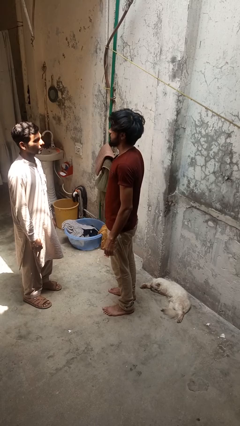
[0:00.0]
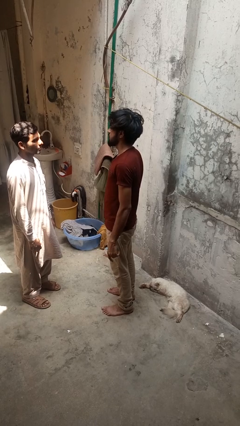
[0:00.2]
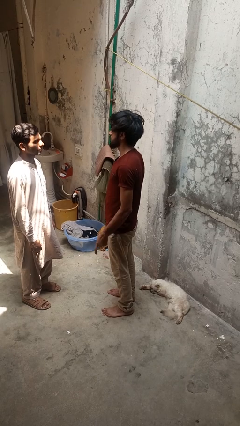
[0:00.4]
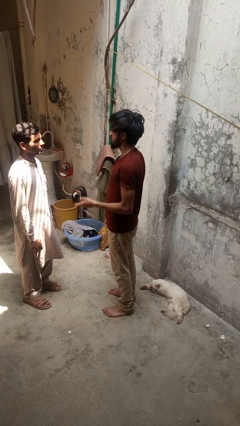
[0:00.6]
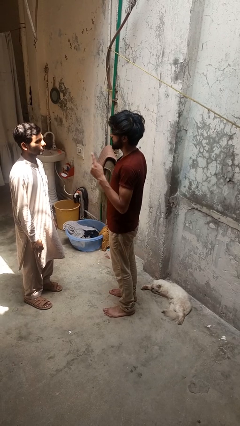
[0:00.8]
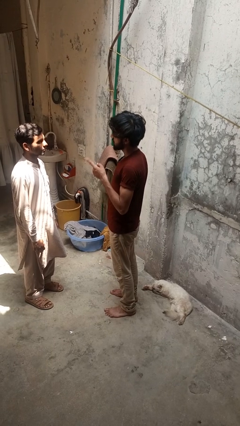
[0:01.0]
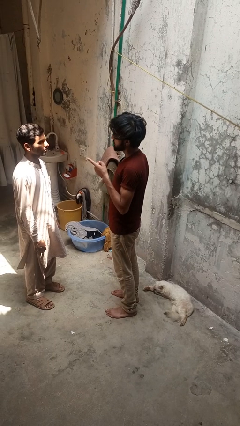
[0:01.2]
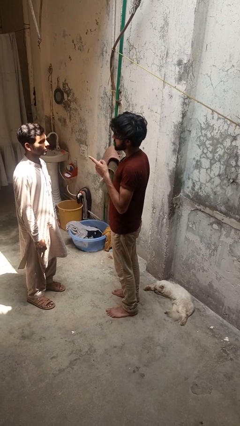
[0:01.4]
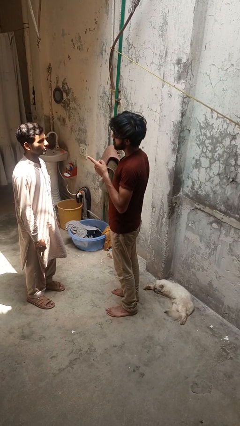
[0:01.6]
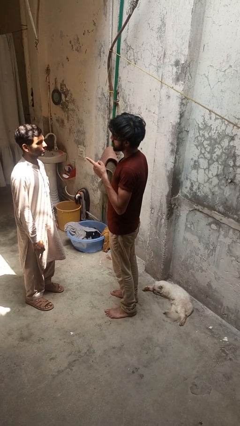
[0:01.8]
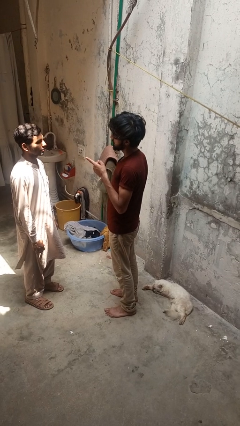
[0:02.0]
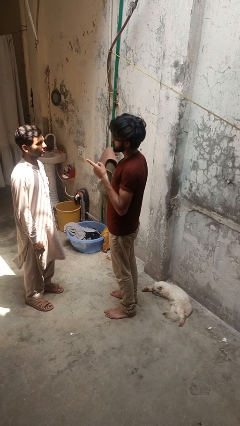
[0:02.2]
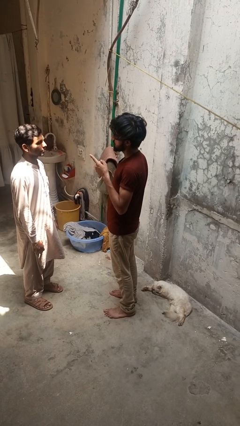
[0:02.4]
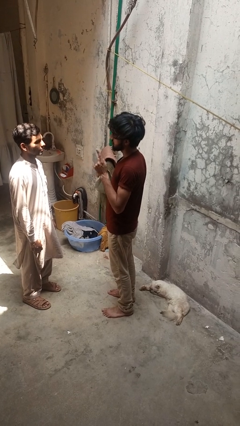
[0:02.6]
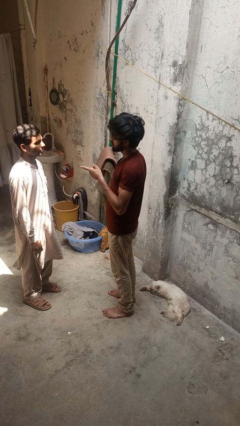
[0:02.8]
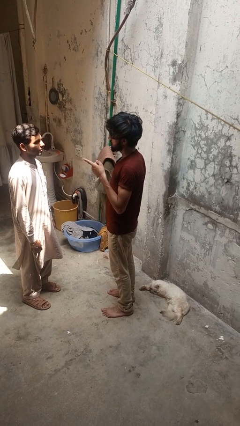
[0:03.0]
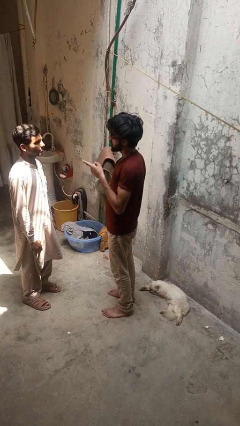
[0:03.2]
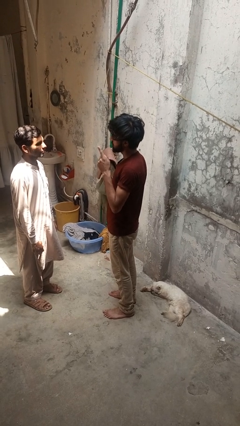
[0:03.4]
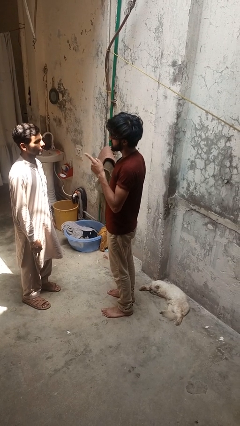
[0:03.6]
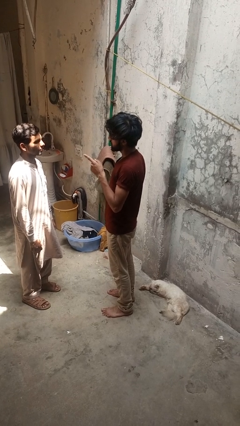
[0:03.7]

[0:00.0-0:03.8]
person points at person

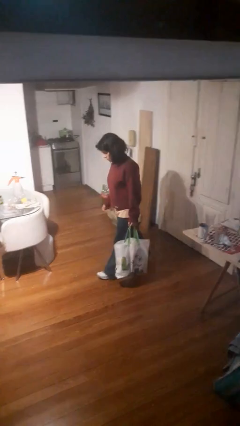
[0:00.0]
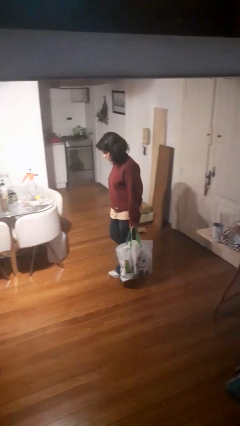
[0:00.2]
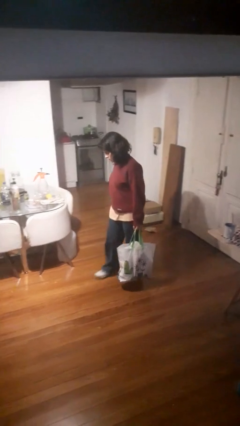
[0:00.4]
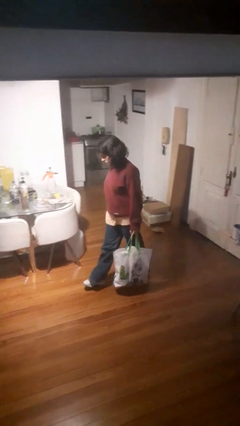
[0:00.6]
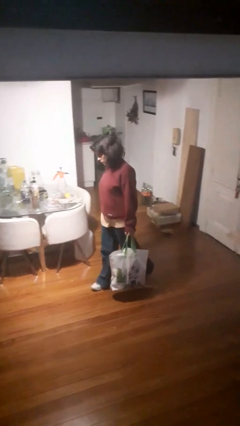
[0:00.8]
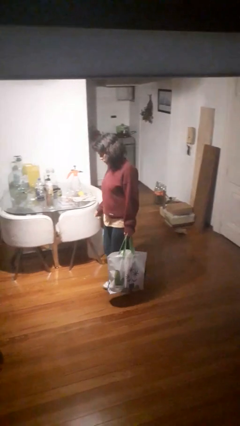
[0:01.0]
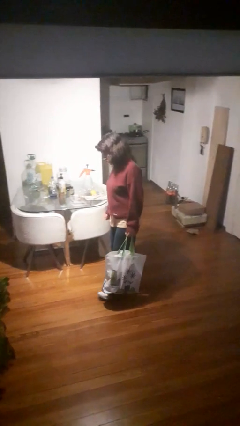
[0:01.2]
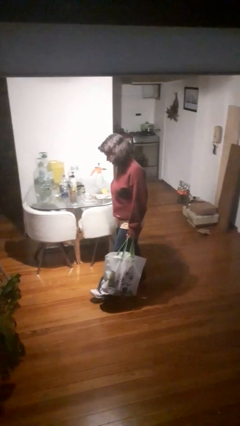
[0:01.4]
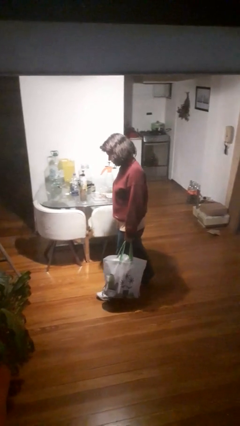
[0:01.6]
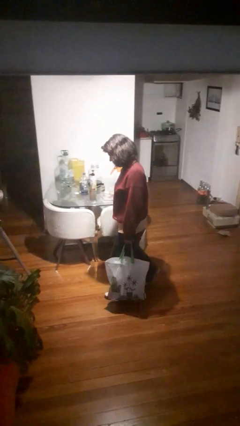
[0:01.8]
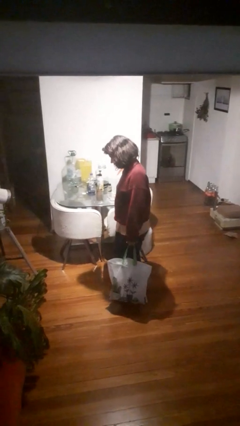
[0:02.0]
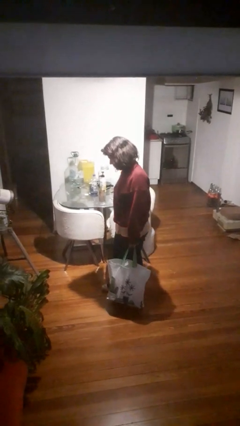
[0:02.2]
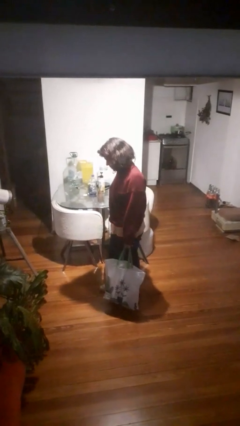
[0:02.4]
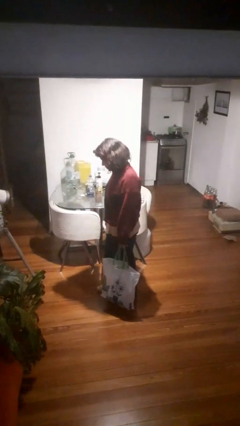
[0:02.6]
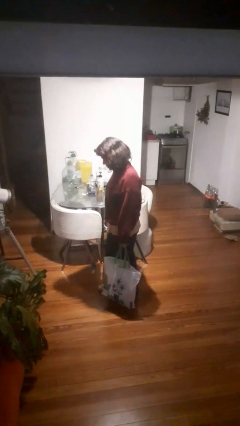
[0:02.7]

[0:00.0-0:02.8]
person carries groceries

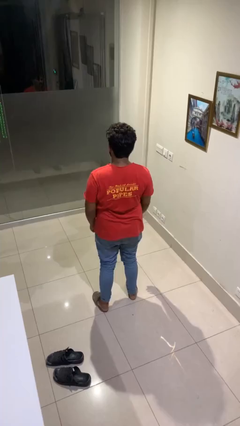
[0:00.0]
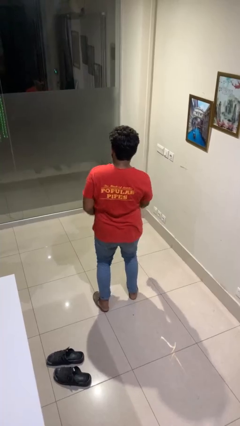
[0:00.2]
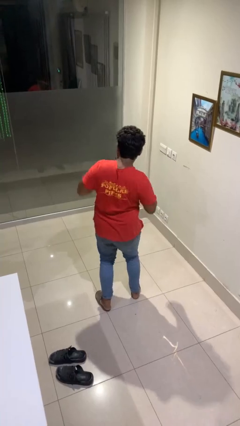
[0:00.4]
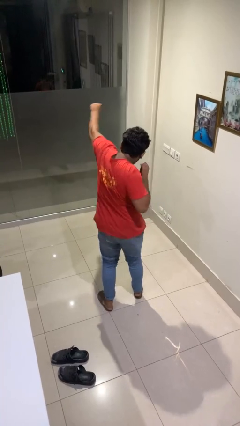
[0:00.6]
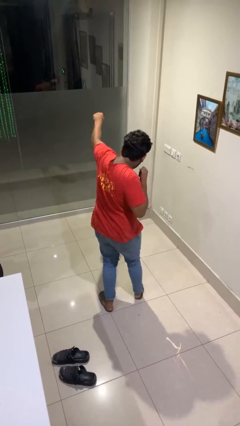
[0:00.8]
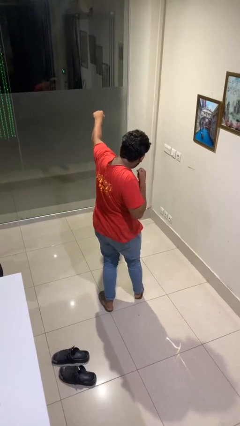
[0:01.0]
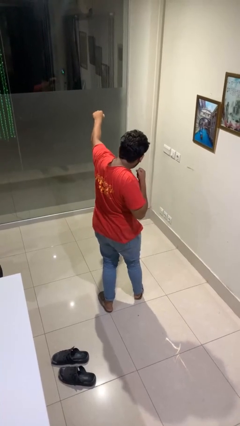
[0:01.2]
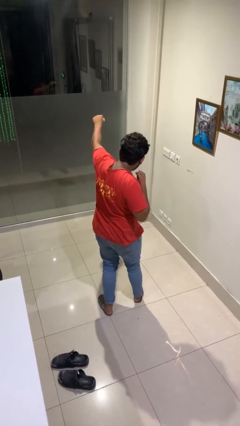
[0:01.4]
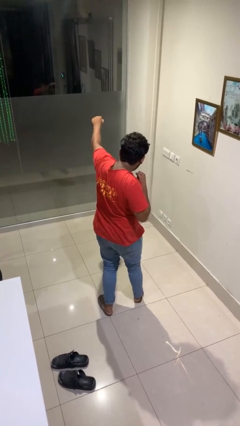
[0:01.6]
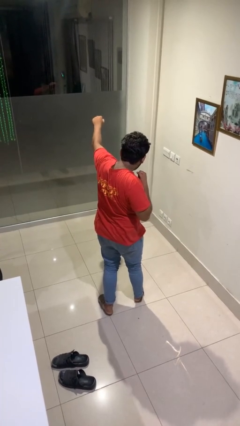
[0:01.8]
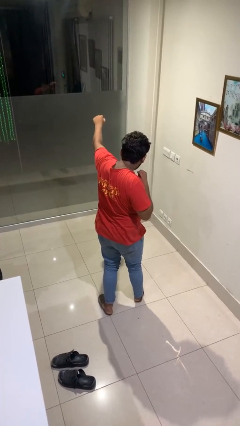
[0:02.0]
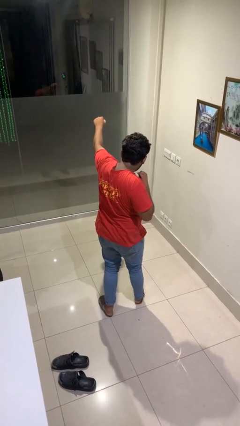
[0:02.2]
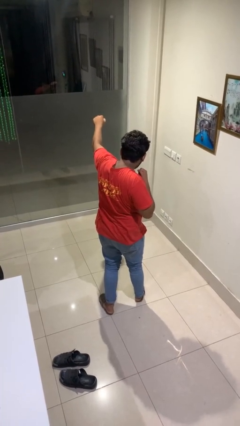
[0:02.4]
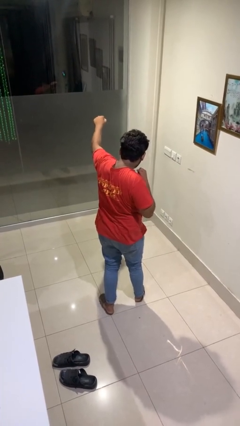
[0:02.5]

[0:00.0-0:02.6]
person punches

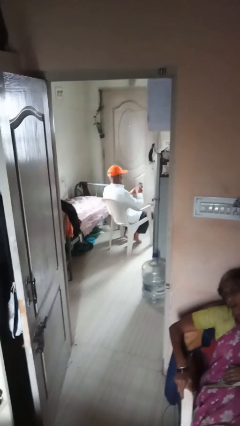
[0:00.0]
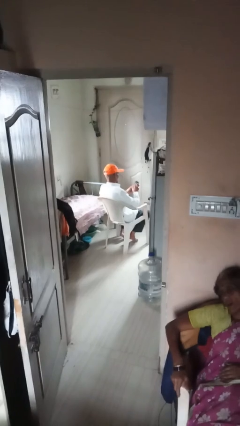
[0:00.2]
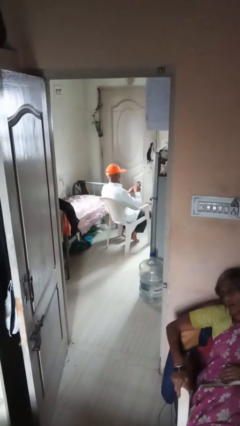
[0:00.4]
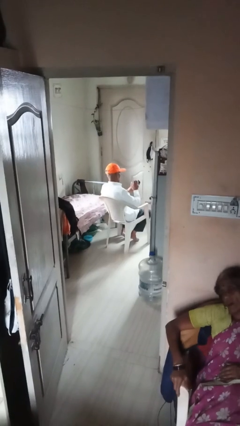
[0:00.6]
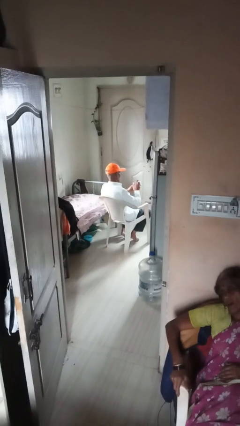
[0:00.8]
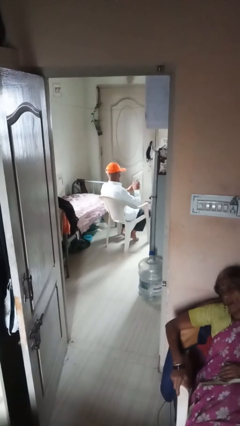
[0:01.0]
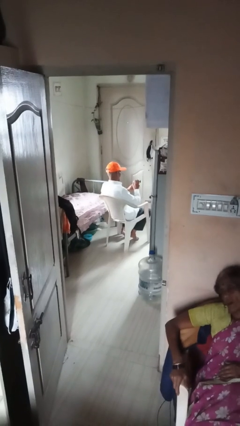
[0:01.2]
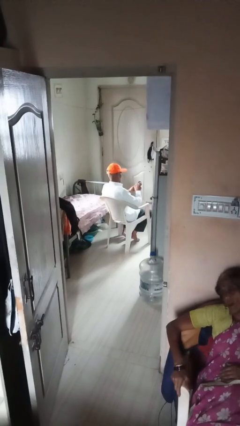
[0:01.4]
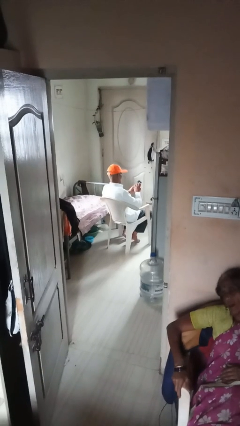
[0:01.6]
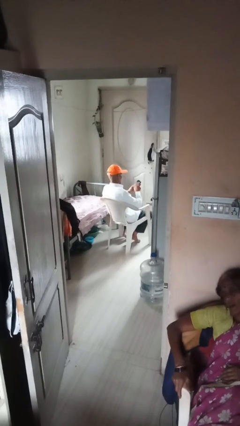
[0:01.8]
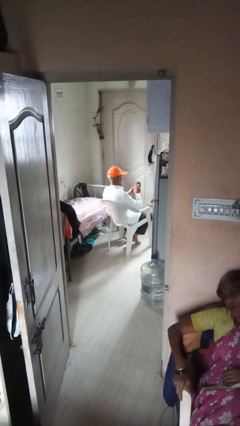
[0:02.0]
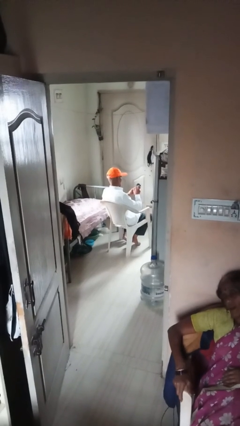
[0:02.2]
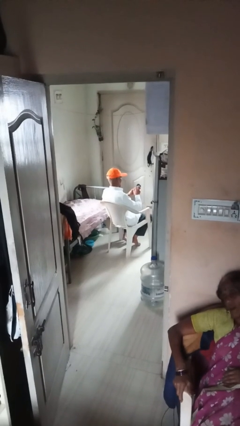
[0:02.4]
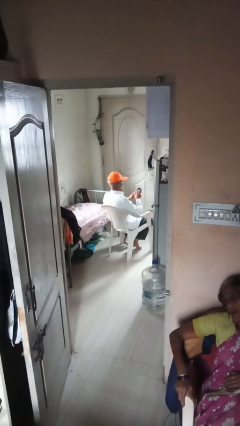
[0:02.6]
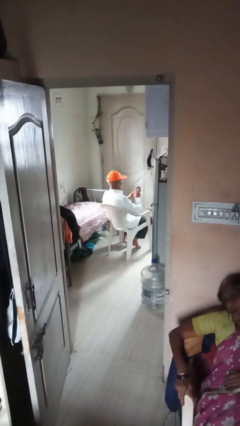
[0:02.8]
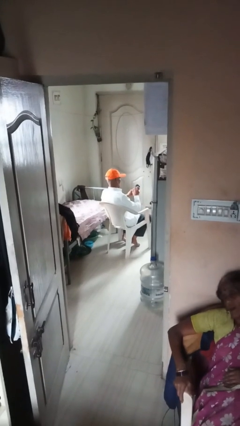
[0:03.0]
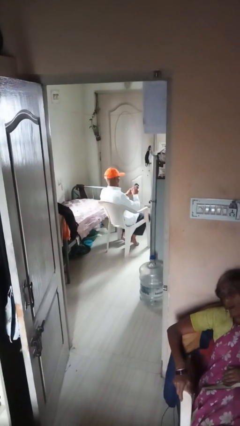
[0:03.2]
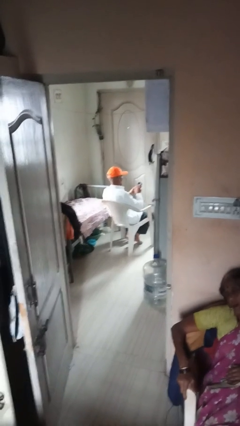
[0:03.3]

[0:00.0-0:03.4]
person taps object with finger

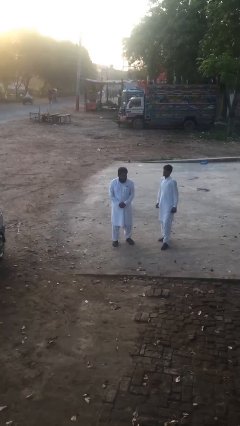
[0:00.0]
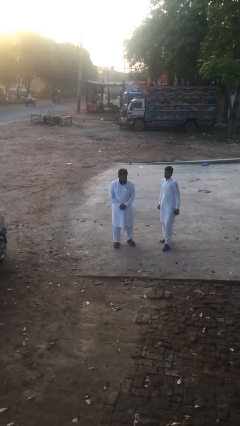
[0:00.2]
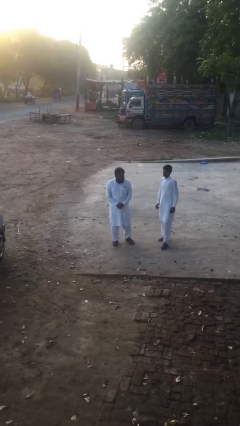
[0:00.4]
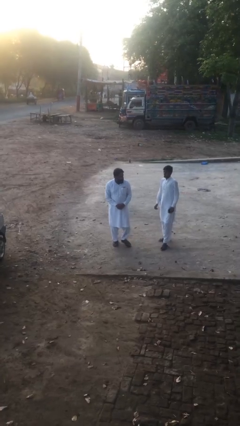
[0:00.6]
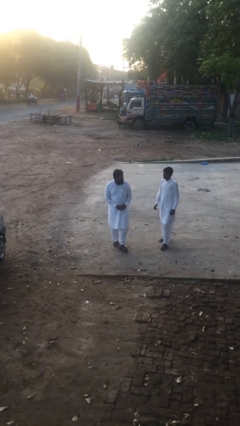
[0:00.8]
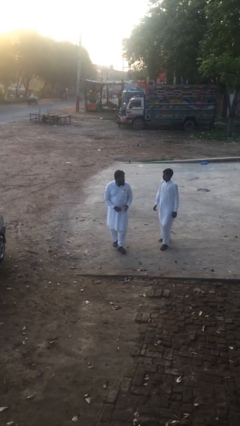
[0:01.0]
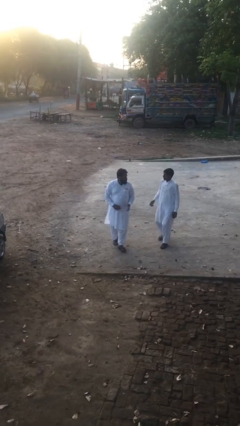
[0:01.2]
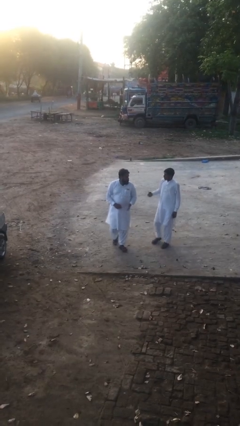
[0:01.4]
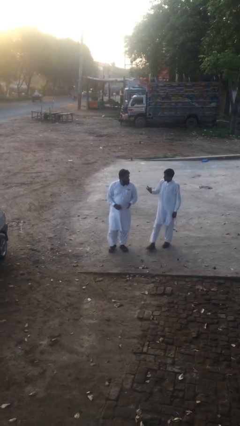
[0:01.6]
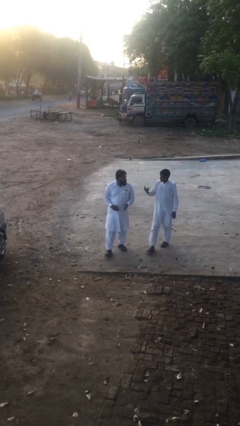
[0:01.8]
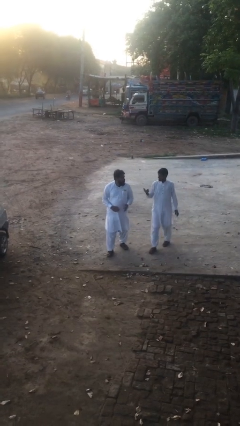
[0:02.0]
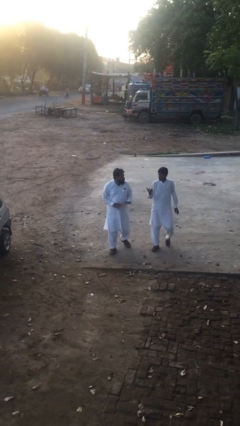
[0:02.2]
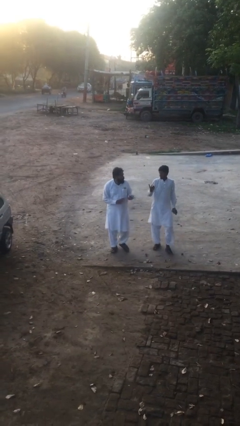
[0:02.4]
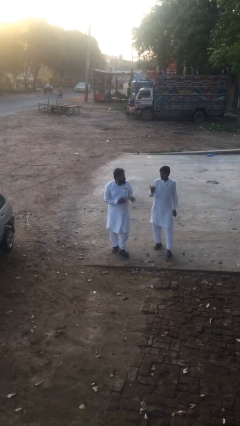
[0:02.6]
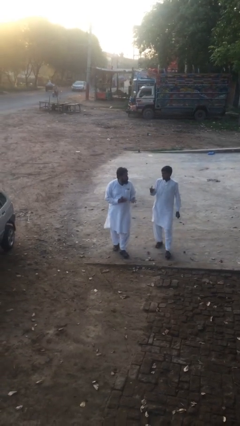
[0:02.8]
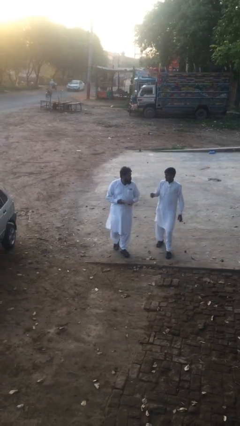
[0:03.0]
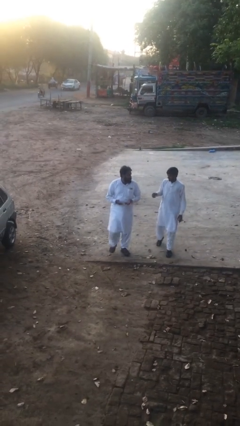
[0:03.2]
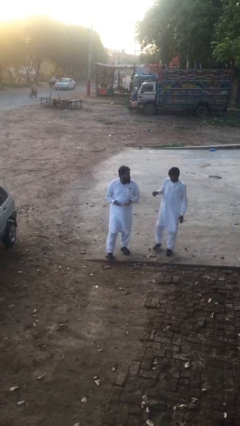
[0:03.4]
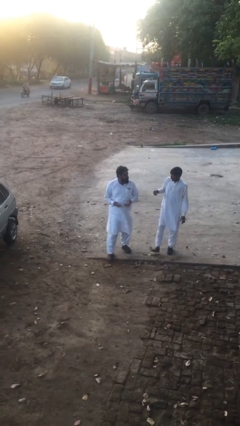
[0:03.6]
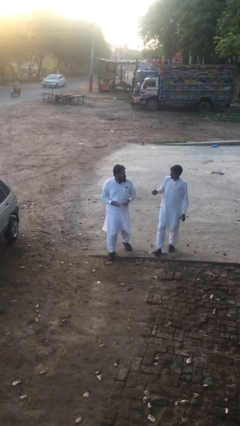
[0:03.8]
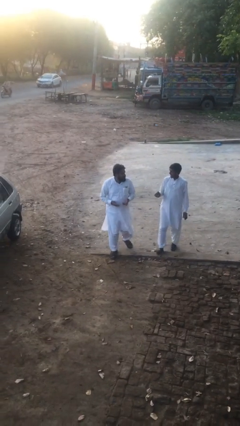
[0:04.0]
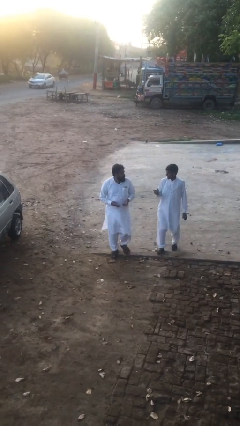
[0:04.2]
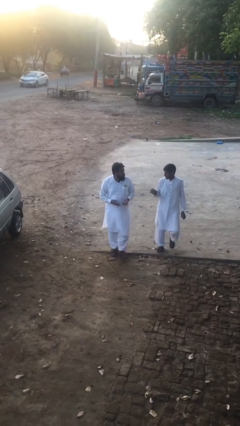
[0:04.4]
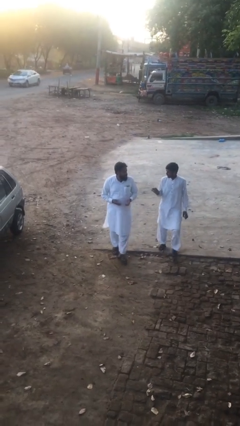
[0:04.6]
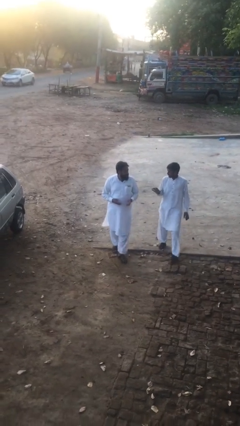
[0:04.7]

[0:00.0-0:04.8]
person talks to person

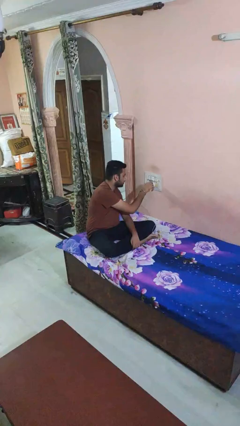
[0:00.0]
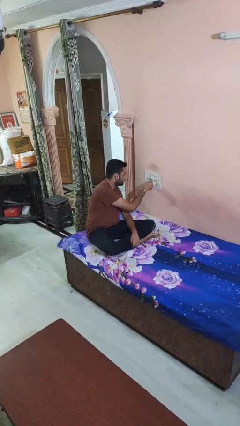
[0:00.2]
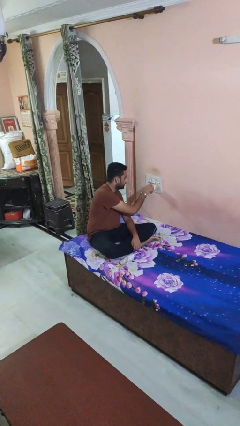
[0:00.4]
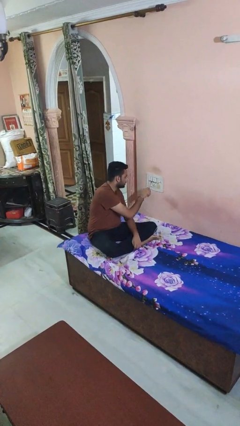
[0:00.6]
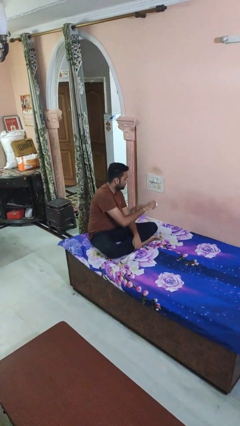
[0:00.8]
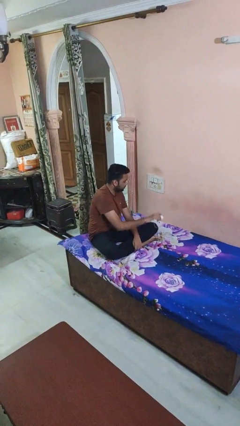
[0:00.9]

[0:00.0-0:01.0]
person unplugs from electrical socket
